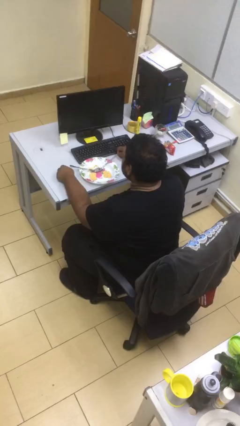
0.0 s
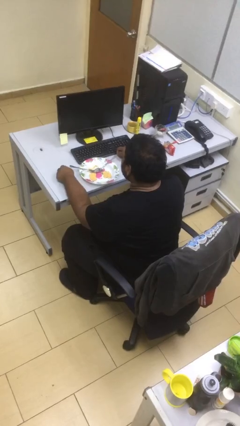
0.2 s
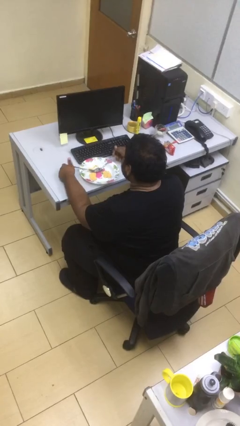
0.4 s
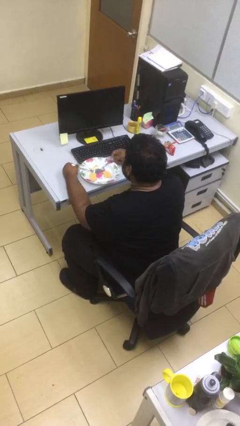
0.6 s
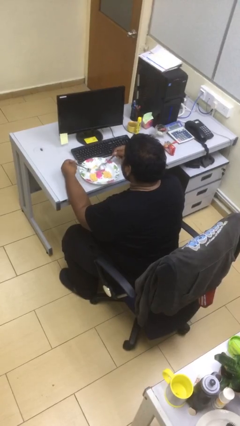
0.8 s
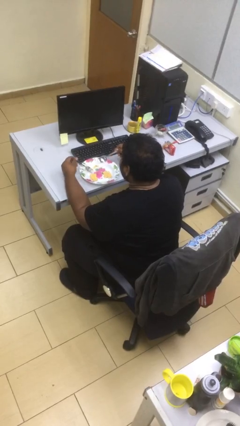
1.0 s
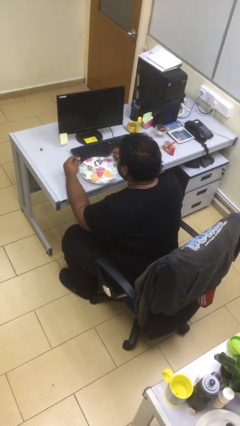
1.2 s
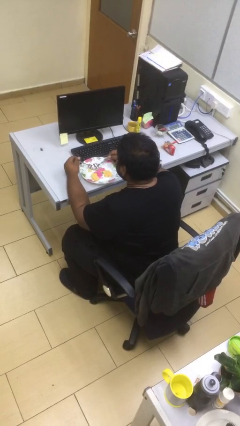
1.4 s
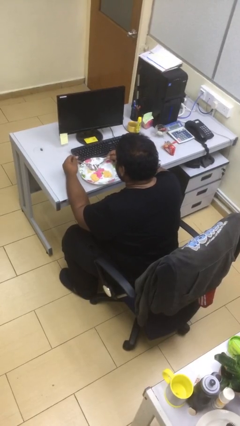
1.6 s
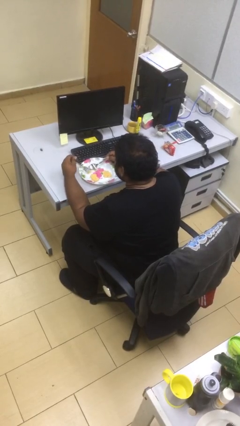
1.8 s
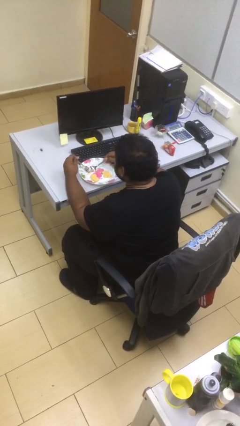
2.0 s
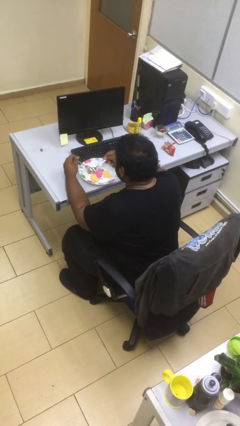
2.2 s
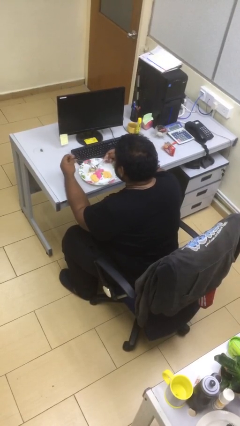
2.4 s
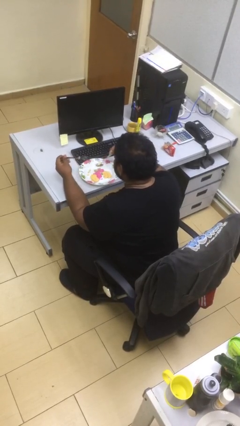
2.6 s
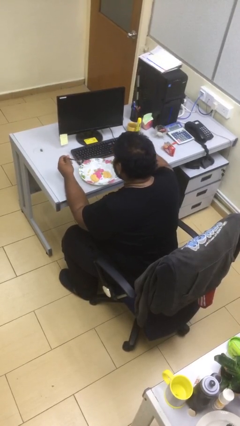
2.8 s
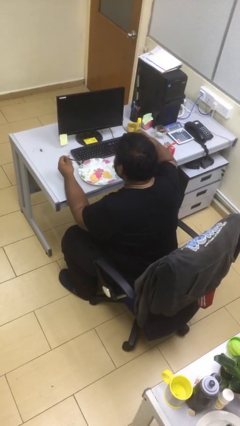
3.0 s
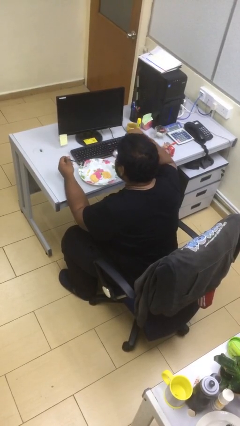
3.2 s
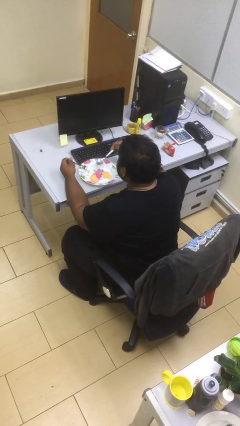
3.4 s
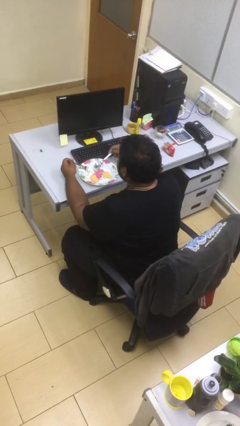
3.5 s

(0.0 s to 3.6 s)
person eats with utensil

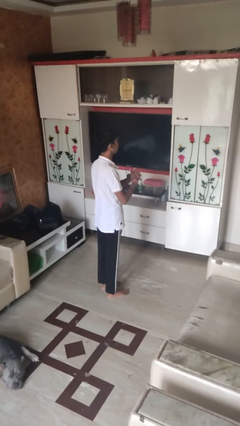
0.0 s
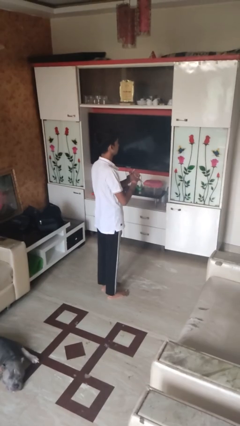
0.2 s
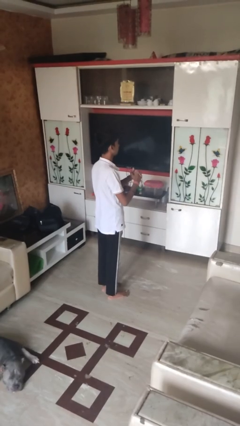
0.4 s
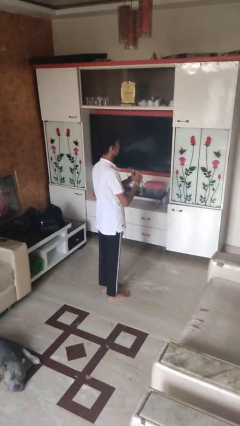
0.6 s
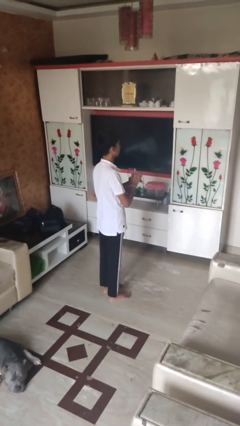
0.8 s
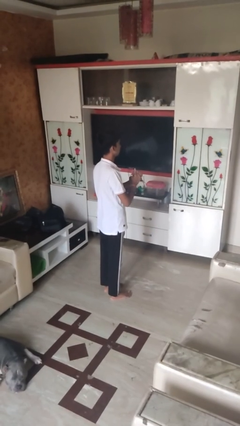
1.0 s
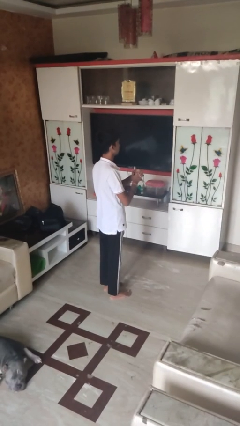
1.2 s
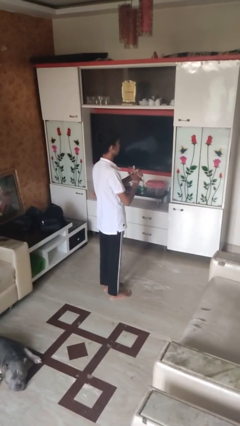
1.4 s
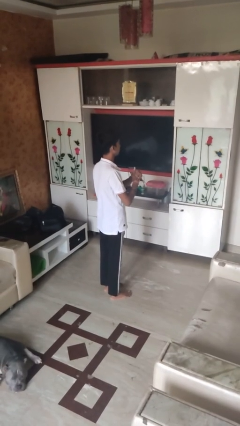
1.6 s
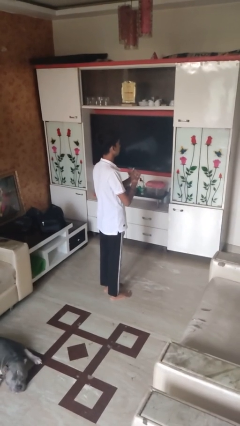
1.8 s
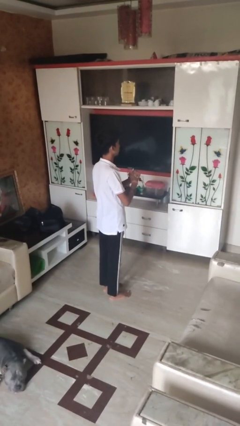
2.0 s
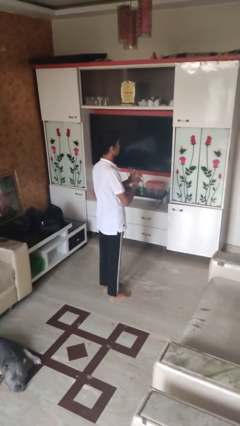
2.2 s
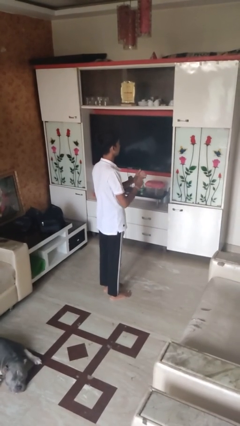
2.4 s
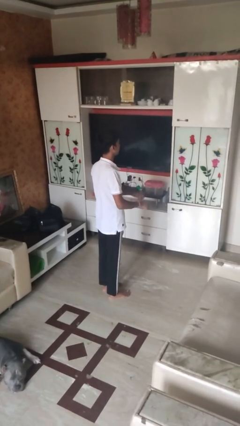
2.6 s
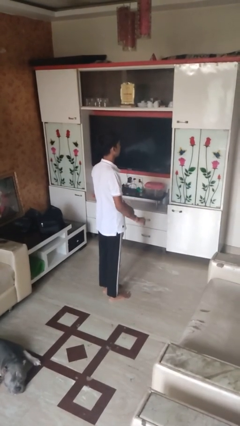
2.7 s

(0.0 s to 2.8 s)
person cracks knuckles

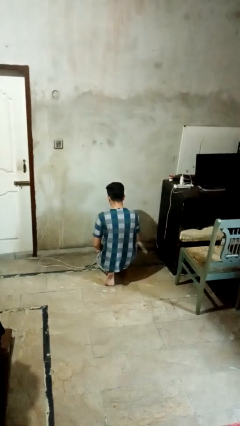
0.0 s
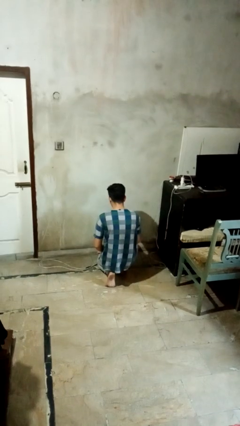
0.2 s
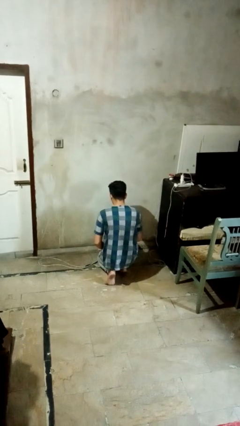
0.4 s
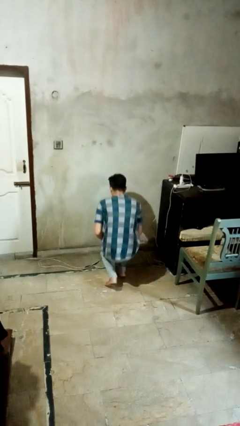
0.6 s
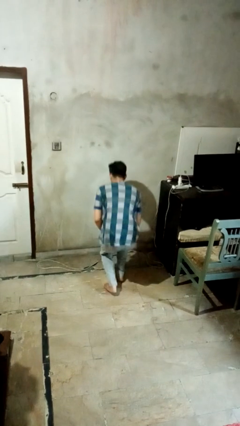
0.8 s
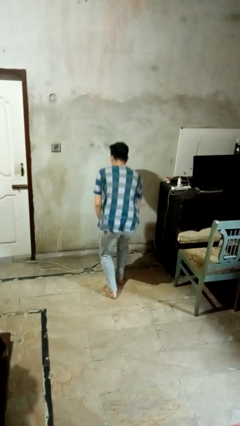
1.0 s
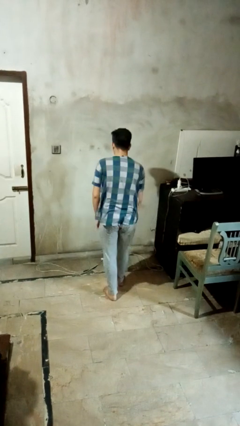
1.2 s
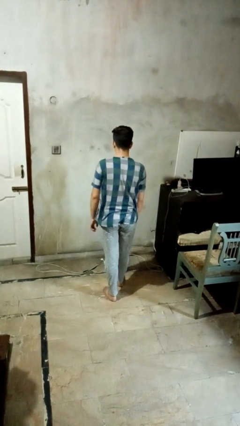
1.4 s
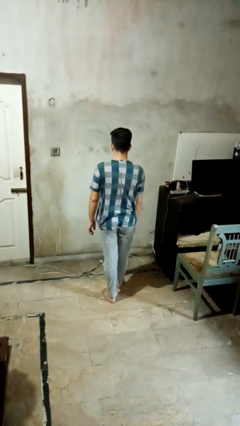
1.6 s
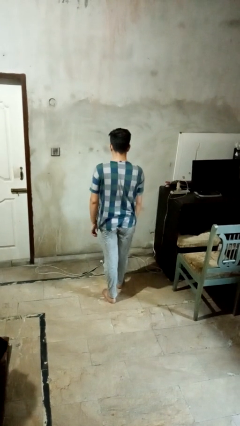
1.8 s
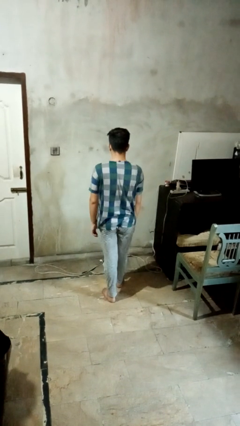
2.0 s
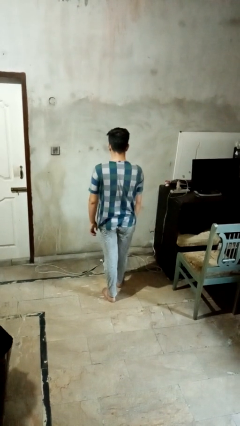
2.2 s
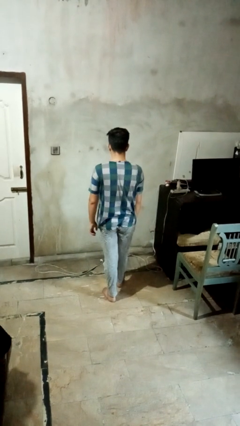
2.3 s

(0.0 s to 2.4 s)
person stands up from floor

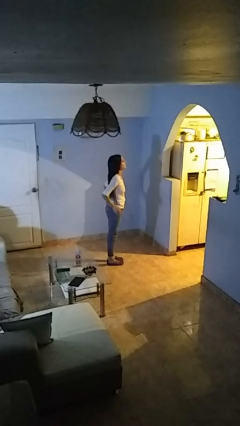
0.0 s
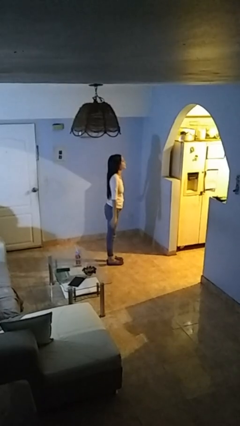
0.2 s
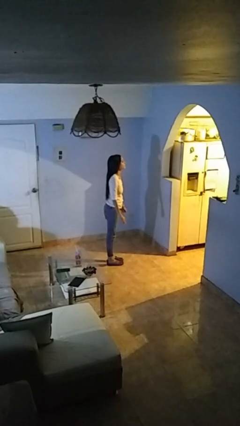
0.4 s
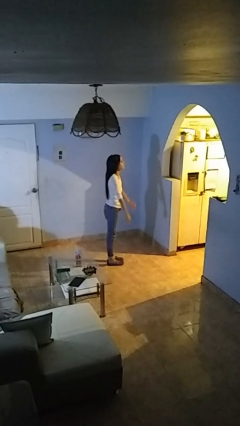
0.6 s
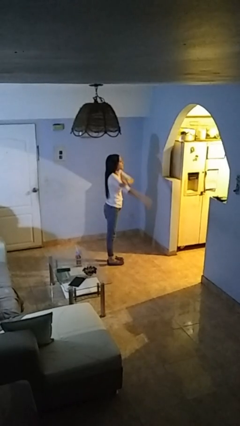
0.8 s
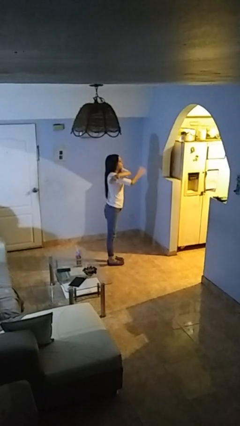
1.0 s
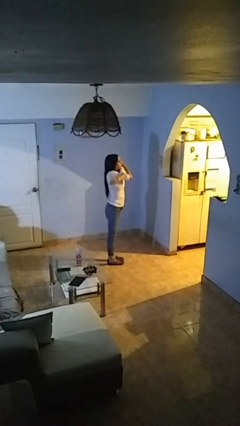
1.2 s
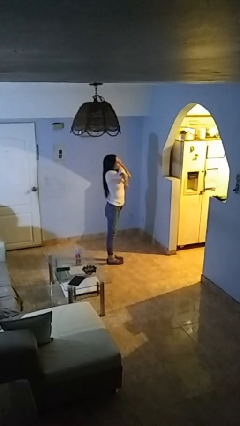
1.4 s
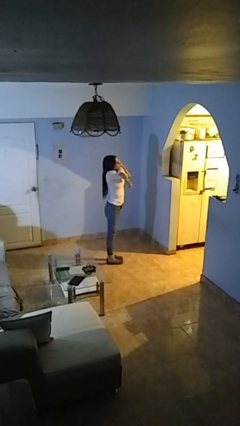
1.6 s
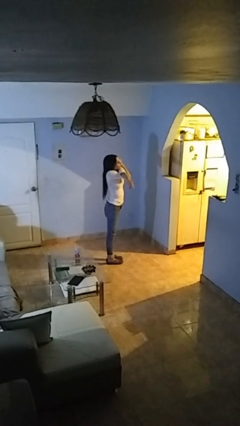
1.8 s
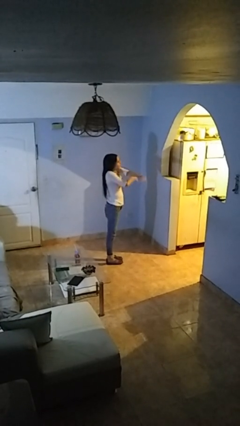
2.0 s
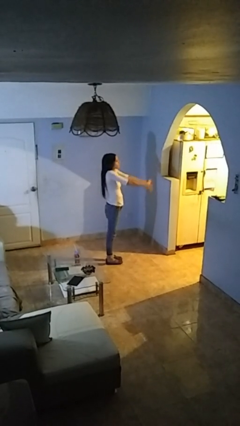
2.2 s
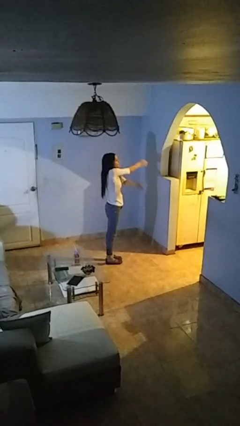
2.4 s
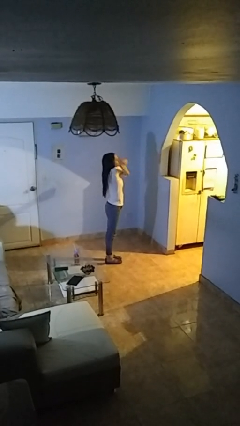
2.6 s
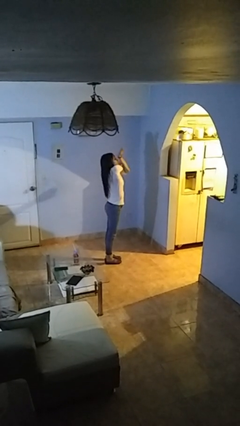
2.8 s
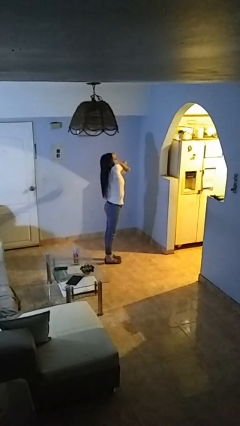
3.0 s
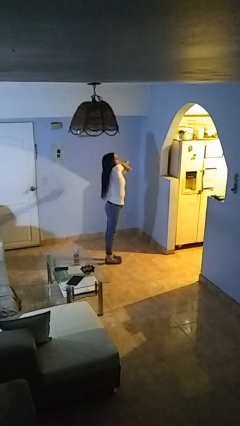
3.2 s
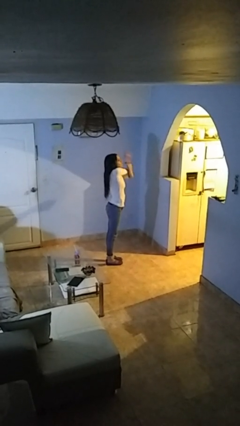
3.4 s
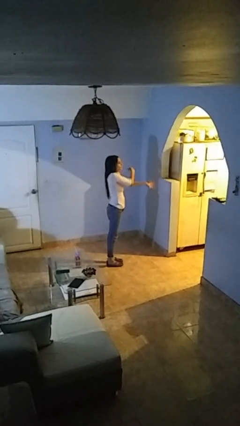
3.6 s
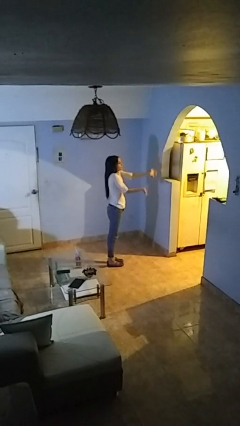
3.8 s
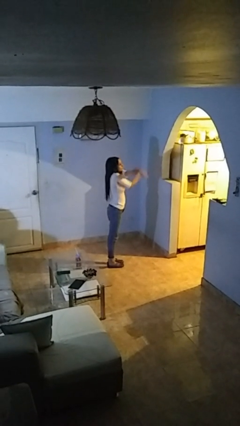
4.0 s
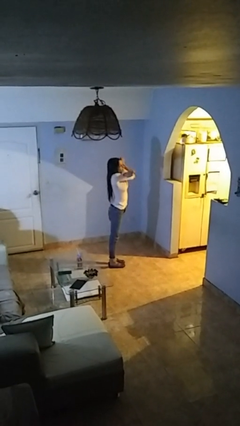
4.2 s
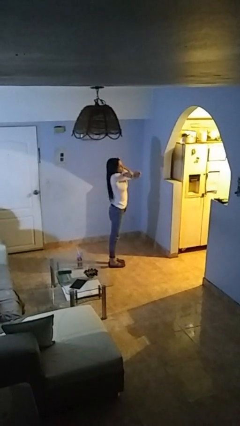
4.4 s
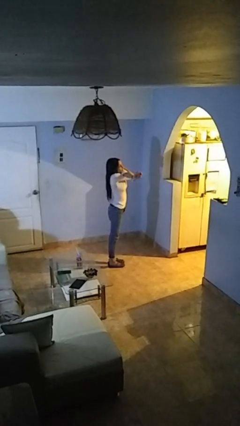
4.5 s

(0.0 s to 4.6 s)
person stretches arms to side

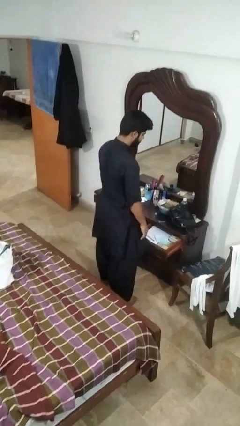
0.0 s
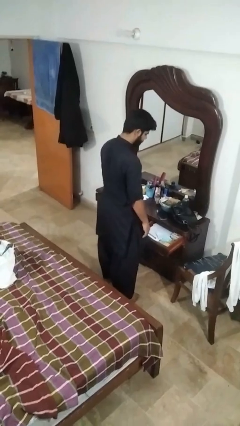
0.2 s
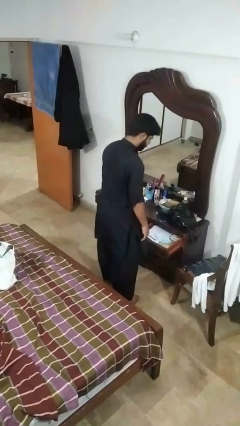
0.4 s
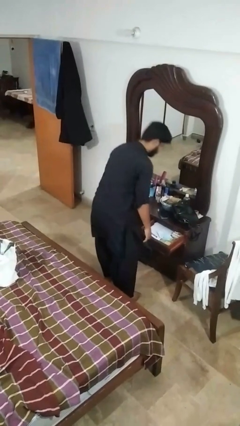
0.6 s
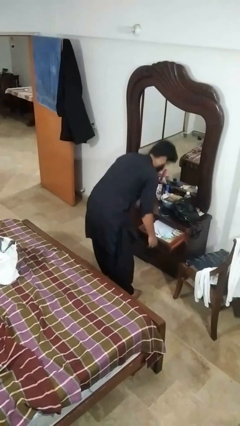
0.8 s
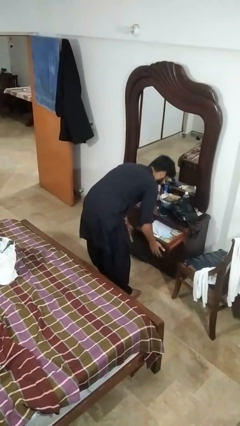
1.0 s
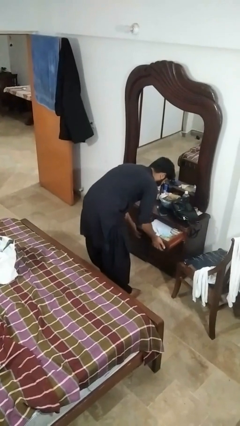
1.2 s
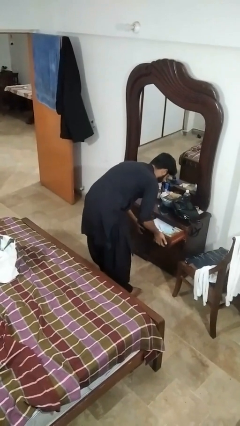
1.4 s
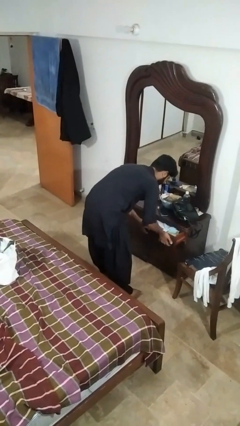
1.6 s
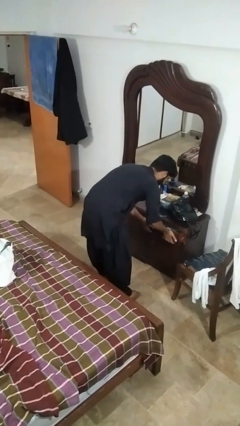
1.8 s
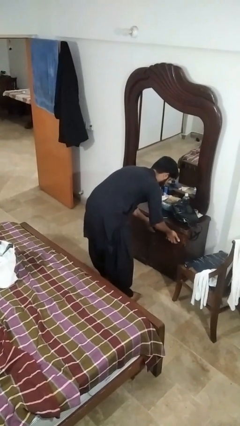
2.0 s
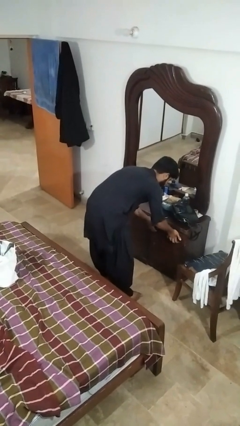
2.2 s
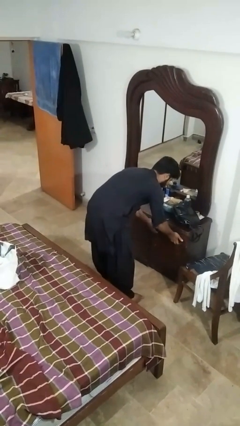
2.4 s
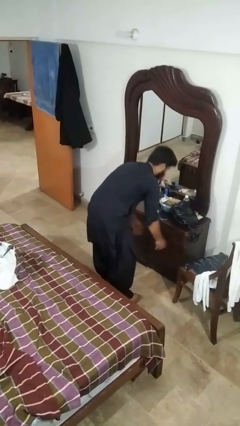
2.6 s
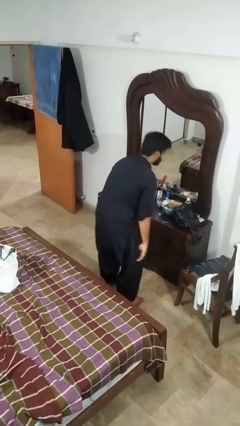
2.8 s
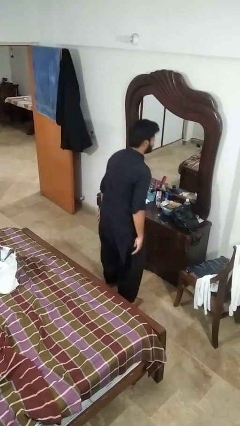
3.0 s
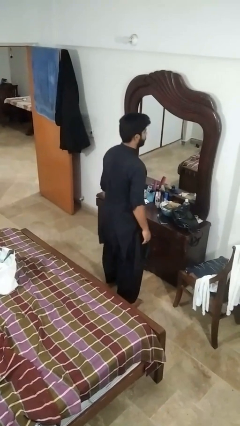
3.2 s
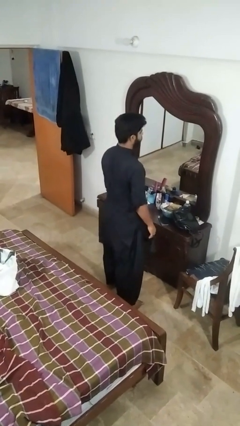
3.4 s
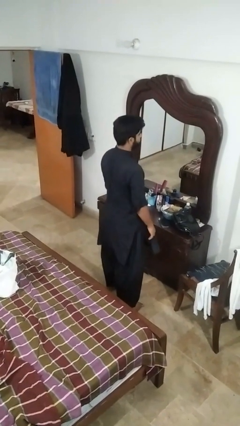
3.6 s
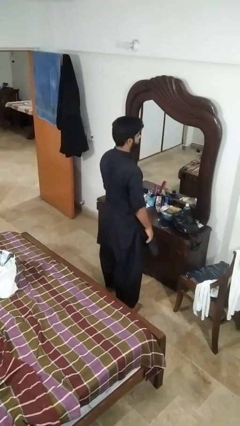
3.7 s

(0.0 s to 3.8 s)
person closes dresser drawer

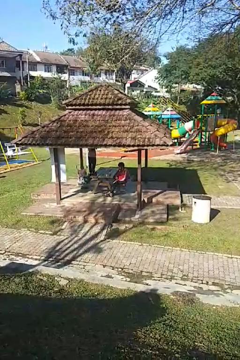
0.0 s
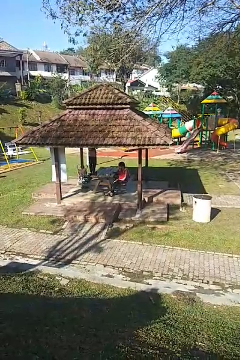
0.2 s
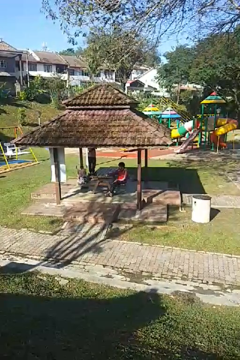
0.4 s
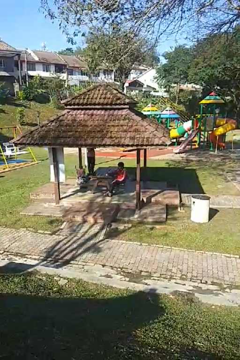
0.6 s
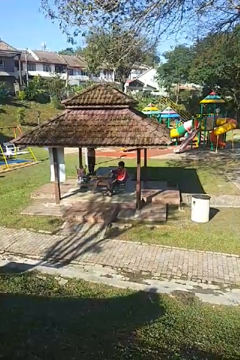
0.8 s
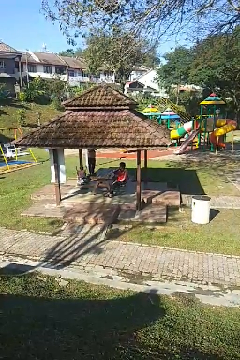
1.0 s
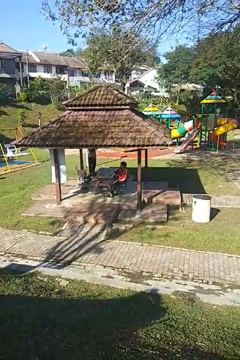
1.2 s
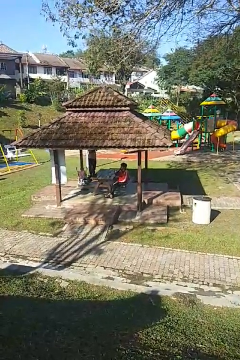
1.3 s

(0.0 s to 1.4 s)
person picks up object from table
